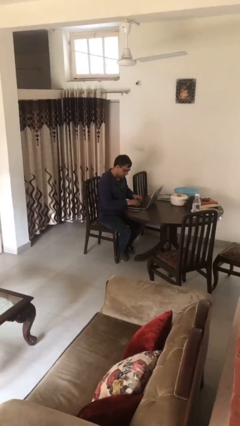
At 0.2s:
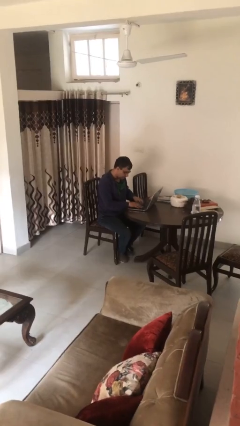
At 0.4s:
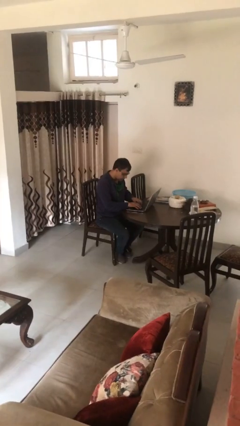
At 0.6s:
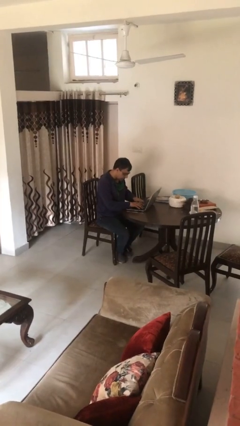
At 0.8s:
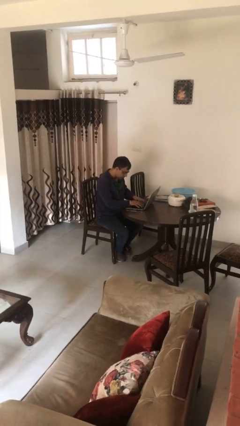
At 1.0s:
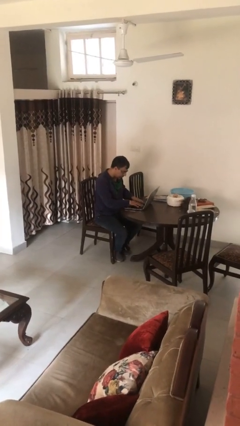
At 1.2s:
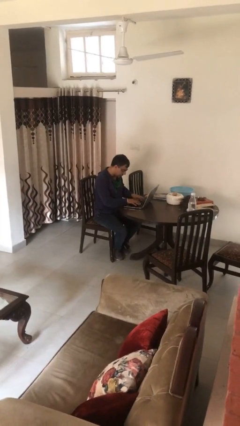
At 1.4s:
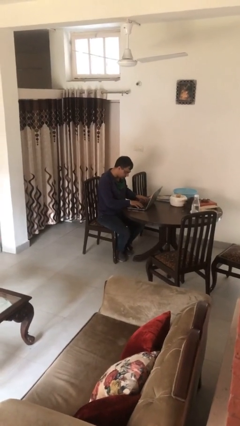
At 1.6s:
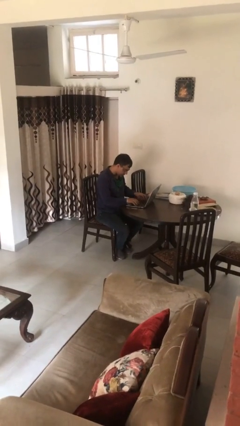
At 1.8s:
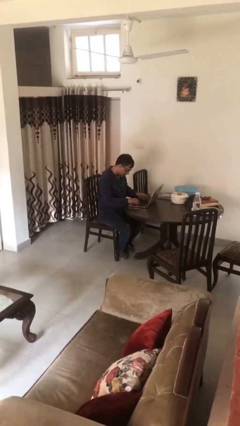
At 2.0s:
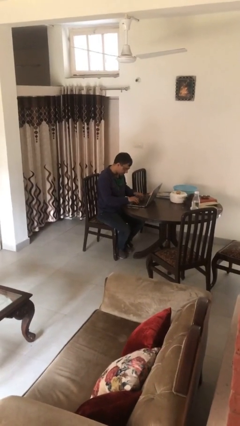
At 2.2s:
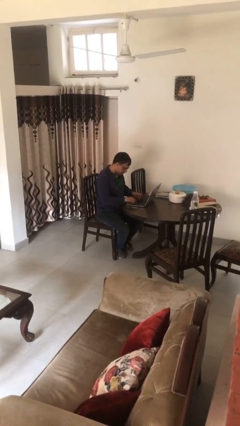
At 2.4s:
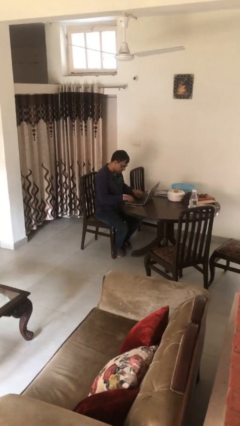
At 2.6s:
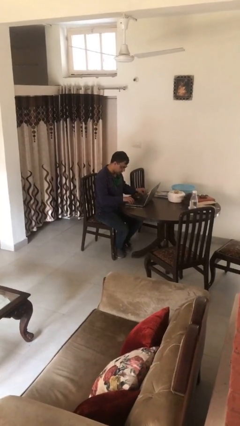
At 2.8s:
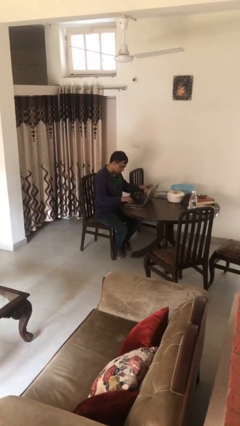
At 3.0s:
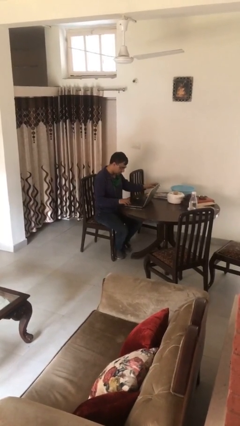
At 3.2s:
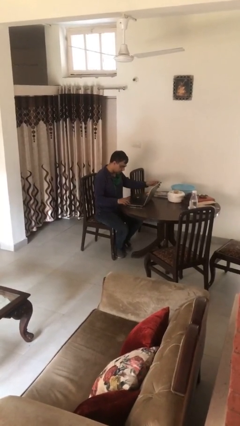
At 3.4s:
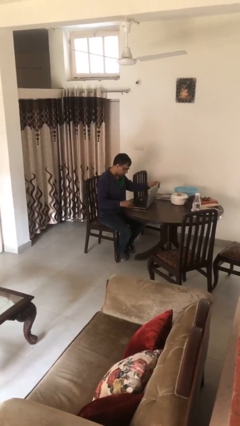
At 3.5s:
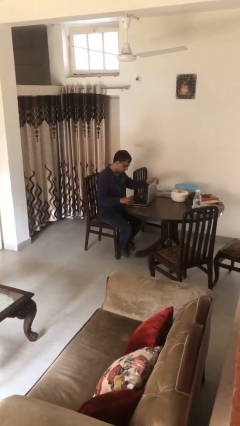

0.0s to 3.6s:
person interacts with laptop

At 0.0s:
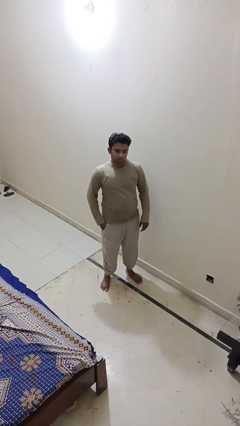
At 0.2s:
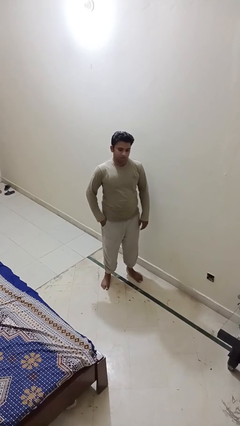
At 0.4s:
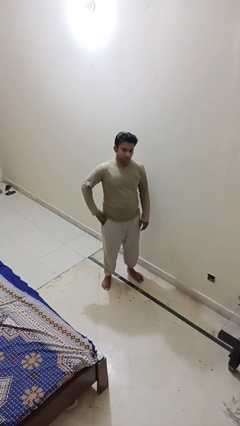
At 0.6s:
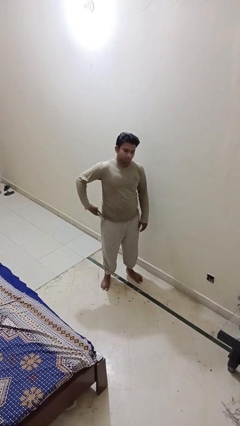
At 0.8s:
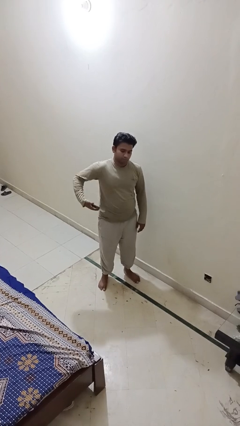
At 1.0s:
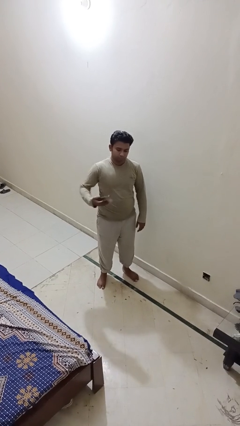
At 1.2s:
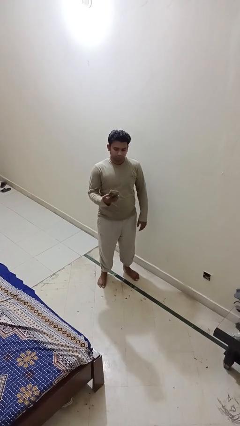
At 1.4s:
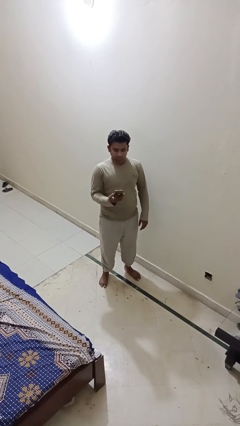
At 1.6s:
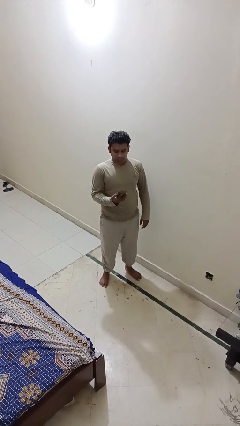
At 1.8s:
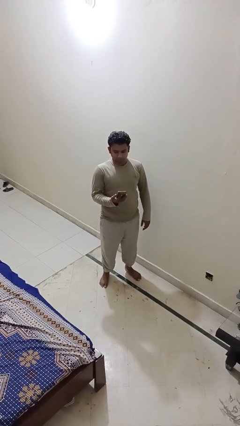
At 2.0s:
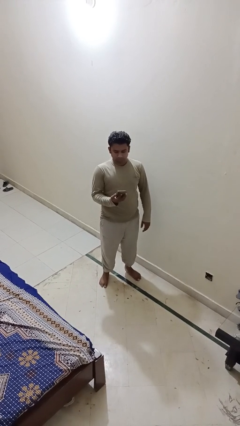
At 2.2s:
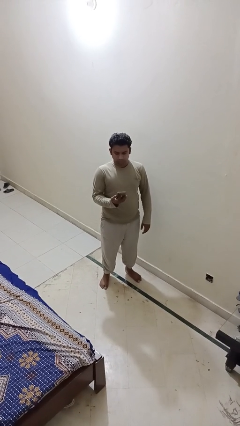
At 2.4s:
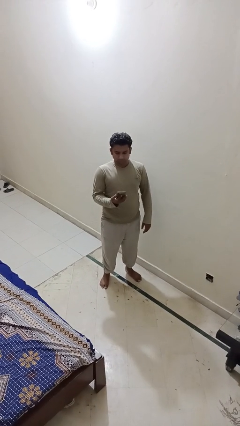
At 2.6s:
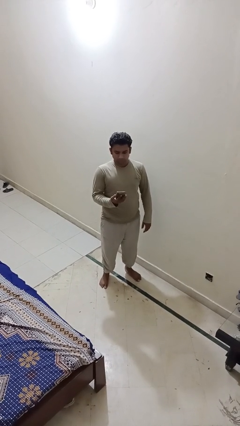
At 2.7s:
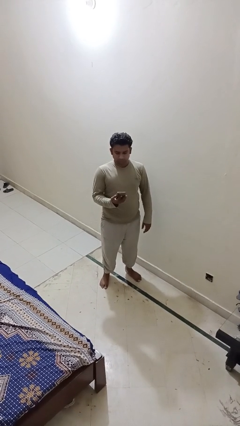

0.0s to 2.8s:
person takes phone from pocket

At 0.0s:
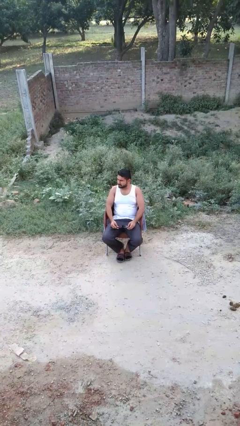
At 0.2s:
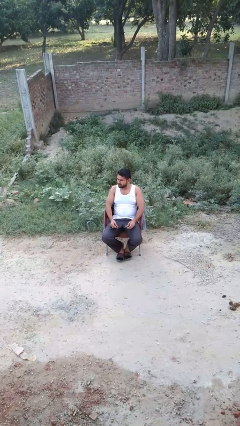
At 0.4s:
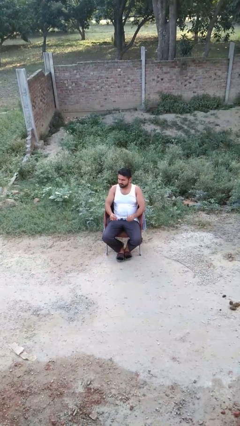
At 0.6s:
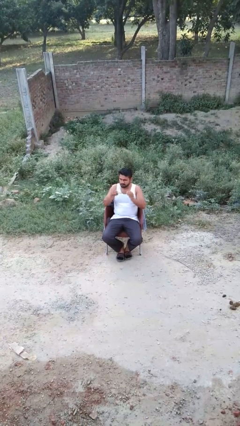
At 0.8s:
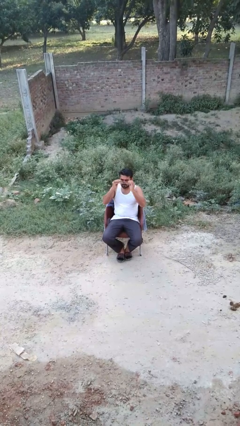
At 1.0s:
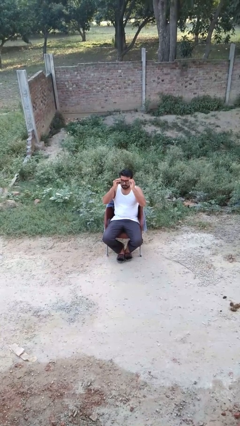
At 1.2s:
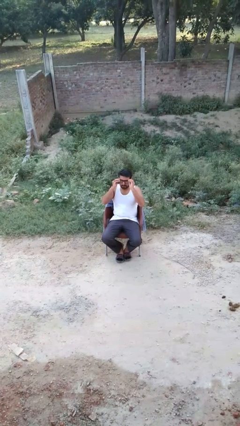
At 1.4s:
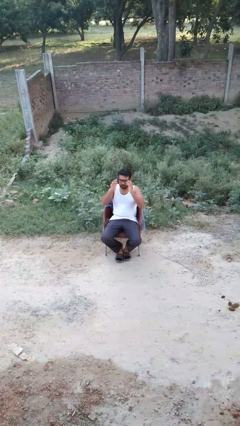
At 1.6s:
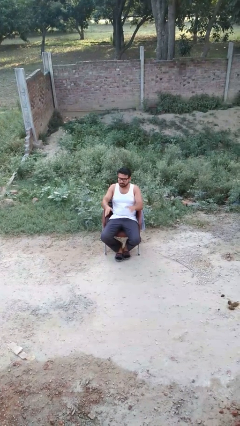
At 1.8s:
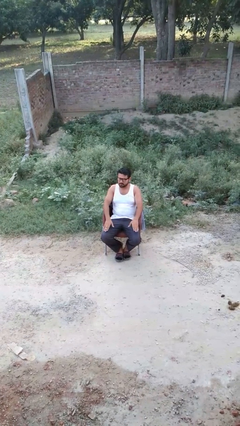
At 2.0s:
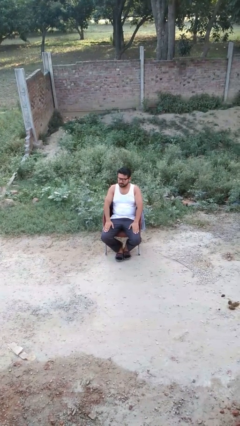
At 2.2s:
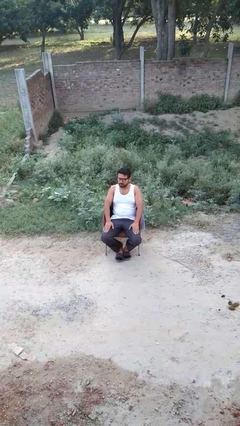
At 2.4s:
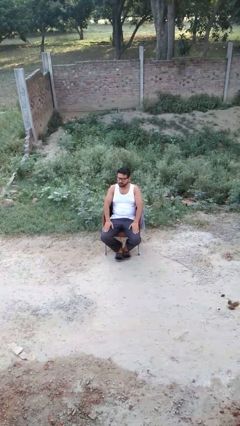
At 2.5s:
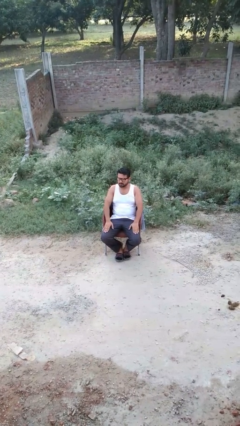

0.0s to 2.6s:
person puts on glasses

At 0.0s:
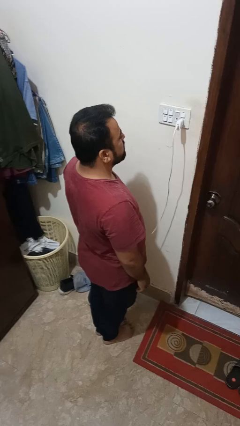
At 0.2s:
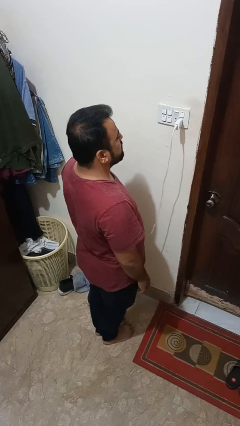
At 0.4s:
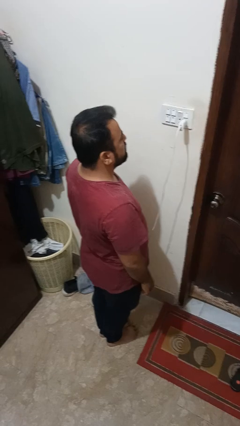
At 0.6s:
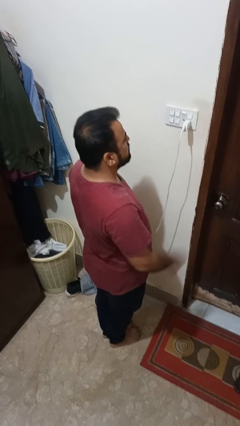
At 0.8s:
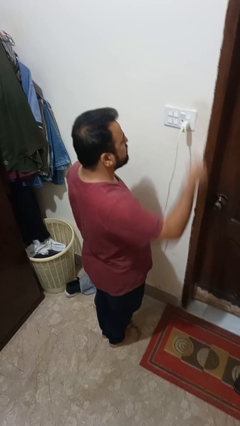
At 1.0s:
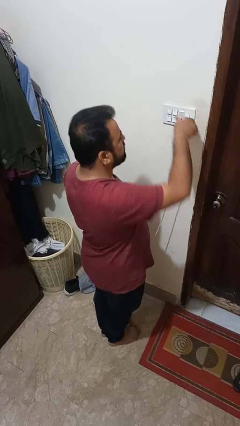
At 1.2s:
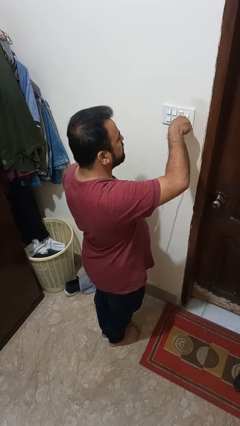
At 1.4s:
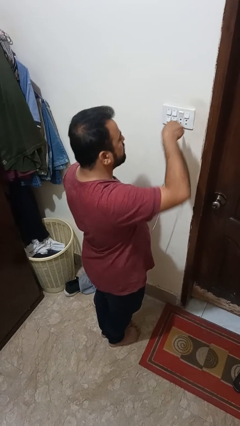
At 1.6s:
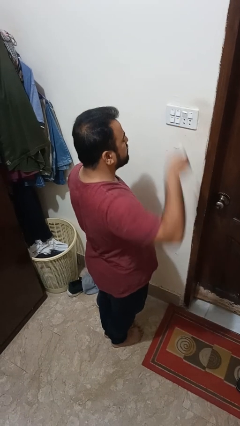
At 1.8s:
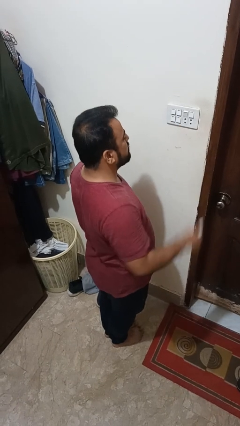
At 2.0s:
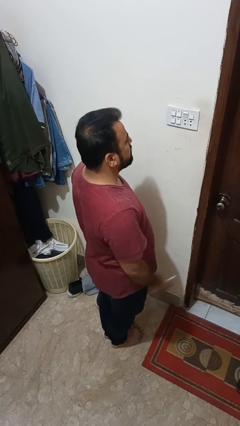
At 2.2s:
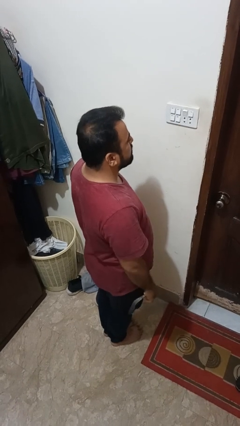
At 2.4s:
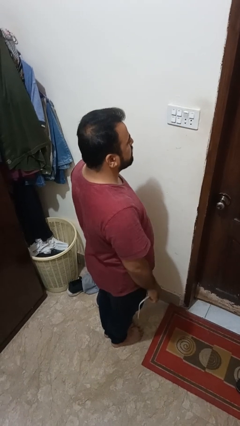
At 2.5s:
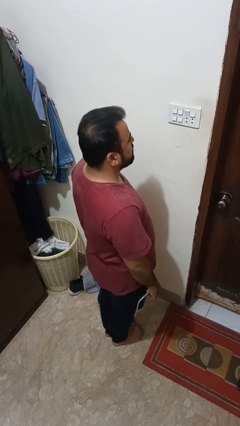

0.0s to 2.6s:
person unplugs from electrical socket

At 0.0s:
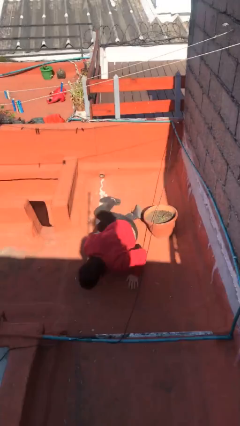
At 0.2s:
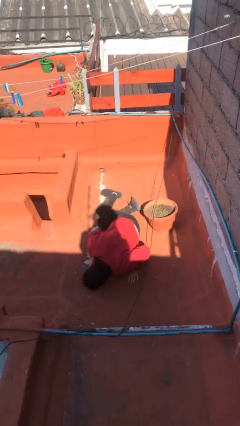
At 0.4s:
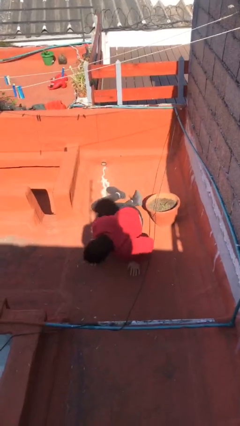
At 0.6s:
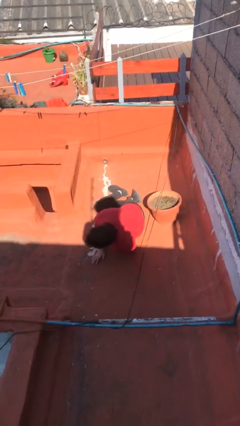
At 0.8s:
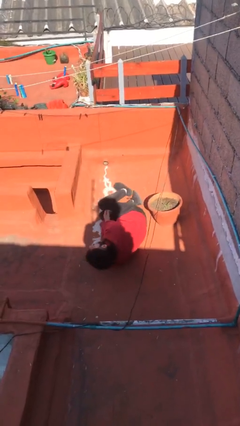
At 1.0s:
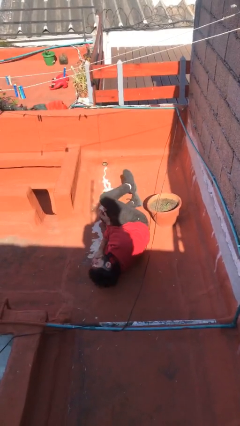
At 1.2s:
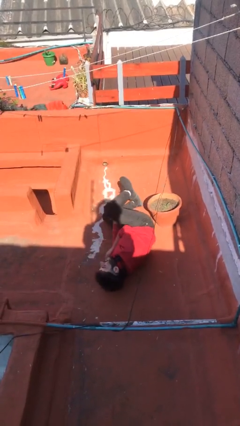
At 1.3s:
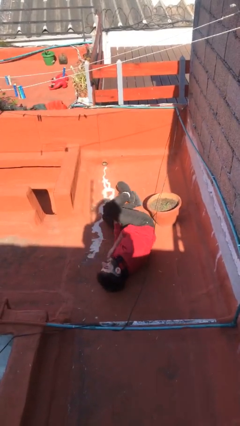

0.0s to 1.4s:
person lies down on floor

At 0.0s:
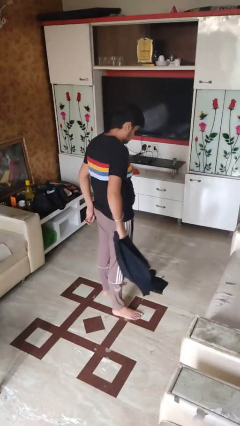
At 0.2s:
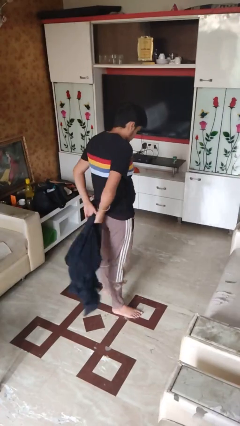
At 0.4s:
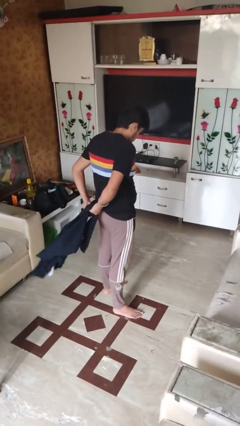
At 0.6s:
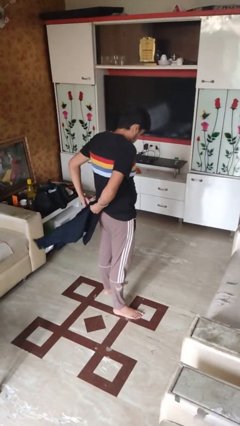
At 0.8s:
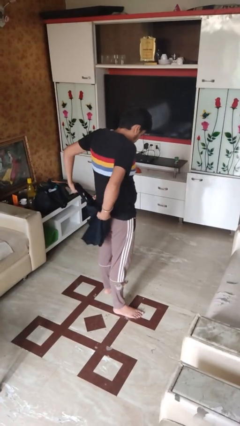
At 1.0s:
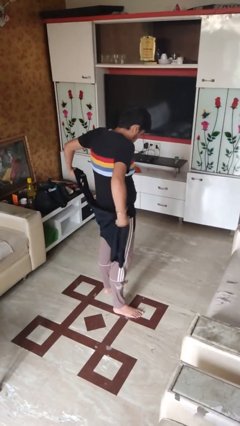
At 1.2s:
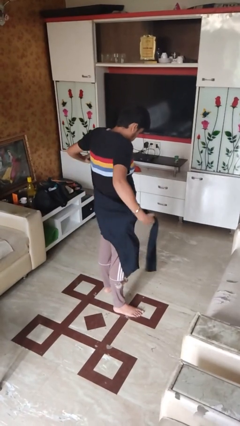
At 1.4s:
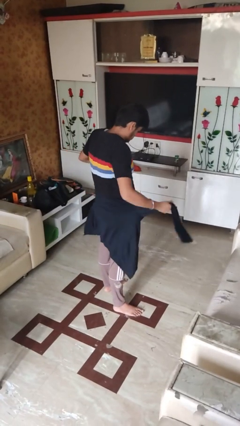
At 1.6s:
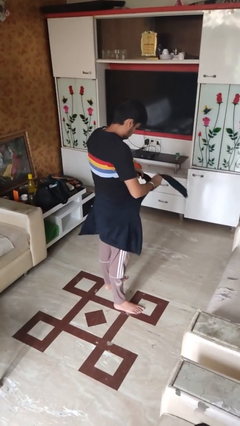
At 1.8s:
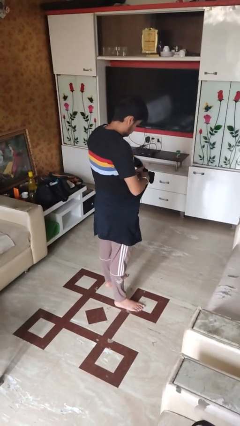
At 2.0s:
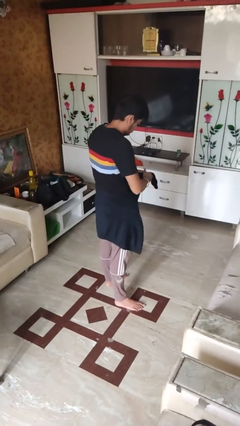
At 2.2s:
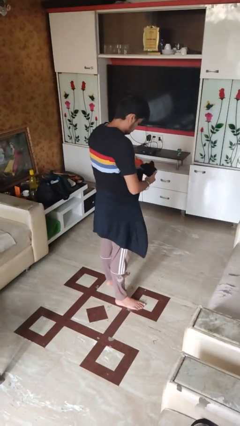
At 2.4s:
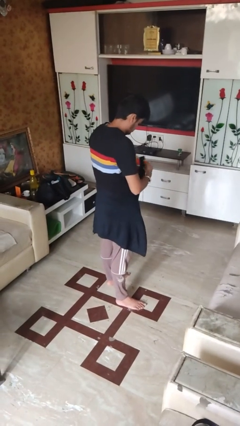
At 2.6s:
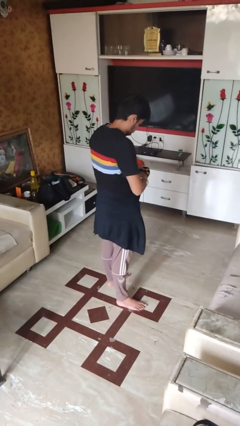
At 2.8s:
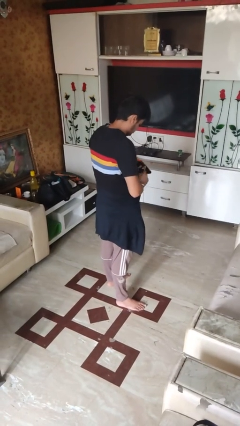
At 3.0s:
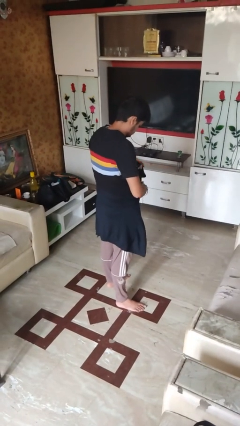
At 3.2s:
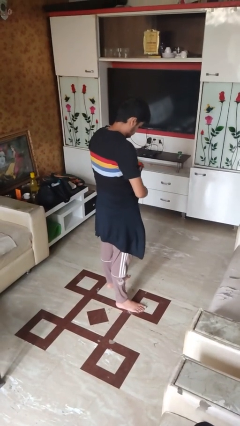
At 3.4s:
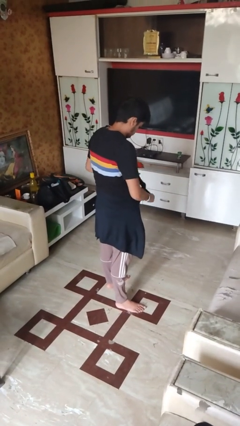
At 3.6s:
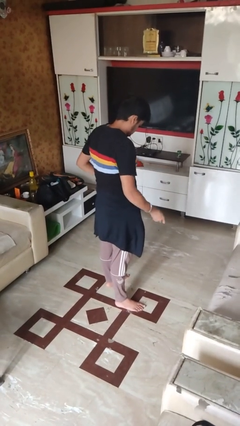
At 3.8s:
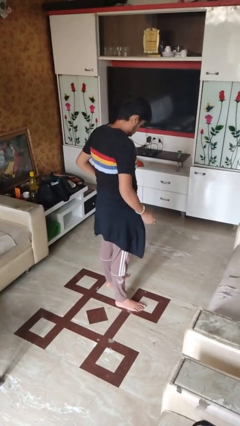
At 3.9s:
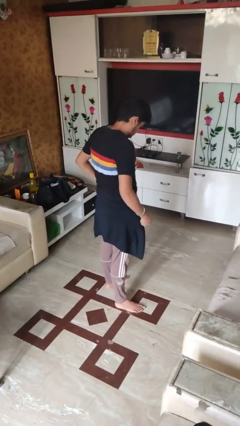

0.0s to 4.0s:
person ties jacket around waist
